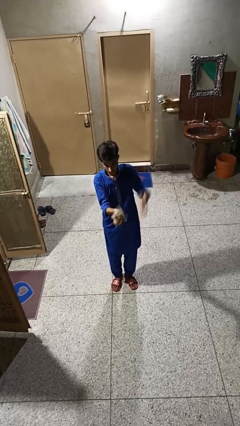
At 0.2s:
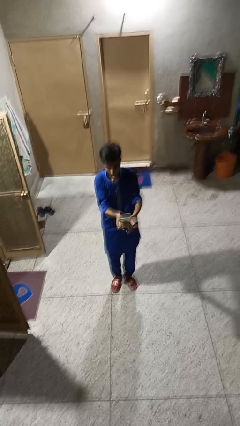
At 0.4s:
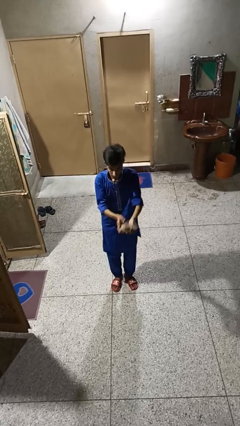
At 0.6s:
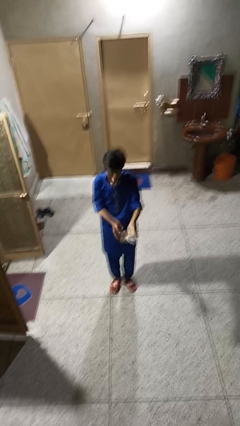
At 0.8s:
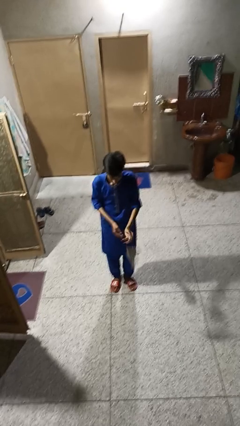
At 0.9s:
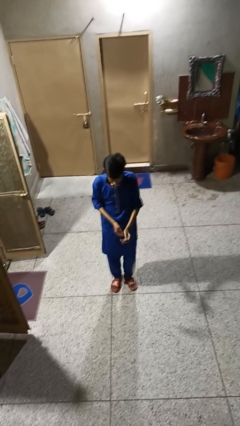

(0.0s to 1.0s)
person catches dropped object

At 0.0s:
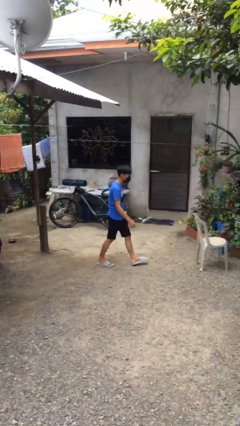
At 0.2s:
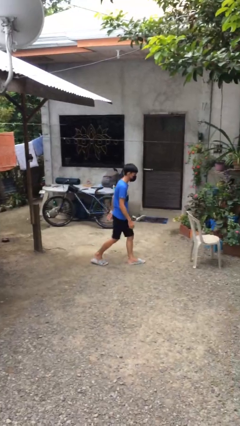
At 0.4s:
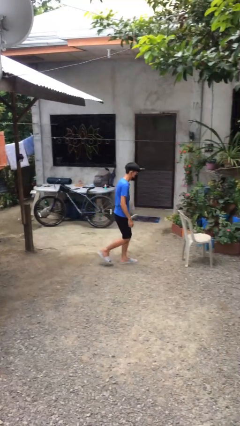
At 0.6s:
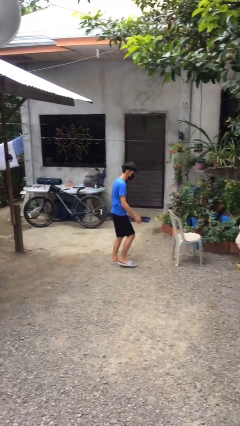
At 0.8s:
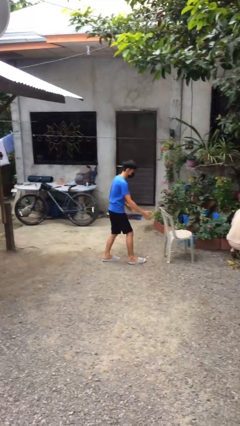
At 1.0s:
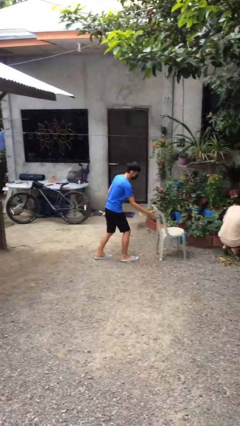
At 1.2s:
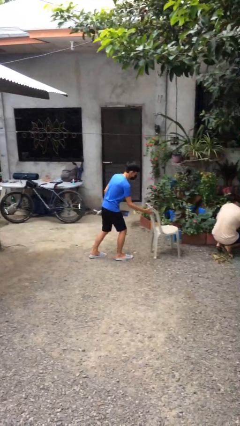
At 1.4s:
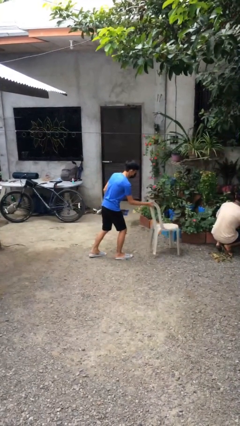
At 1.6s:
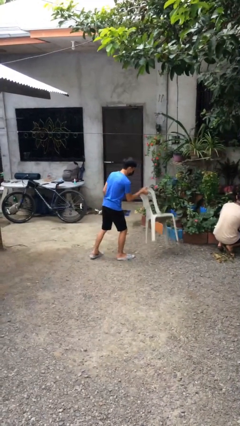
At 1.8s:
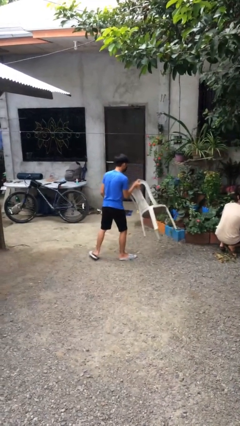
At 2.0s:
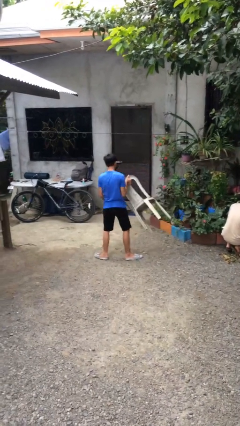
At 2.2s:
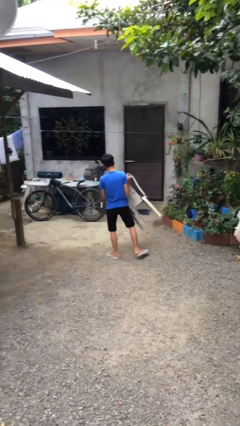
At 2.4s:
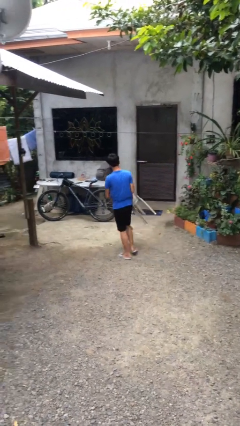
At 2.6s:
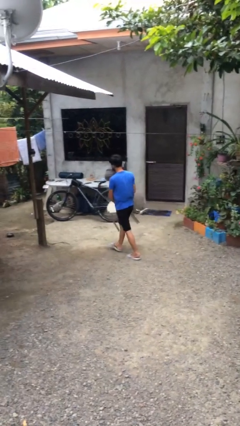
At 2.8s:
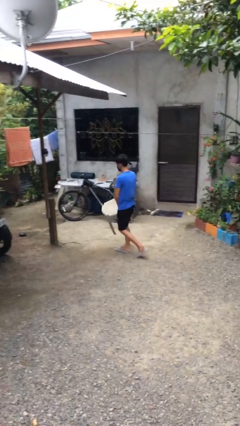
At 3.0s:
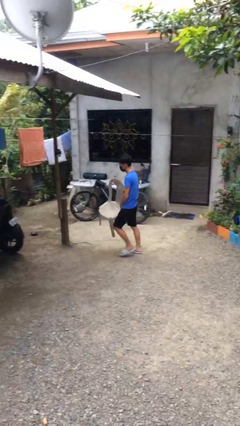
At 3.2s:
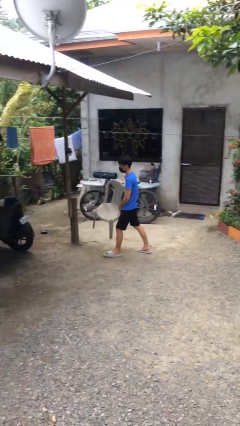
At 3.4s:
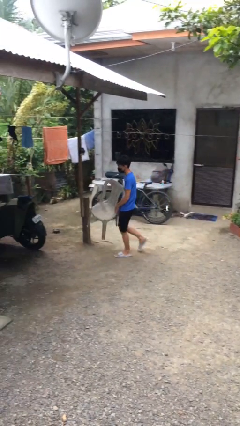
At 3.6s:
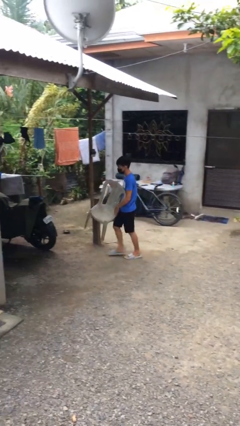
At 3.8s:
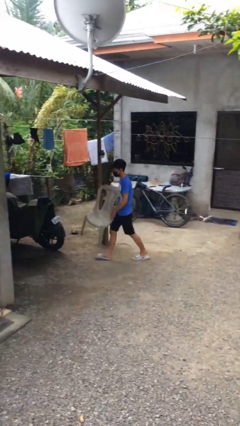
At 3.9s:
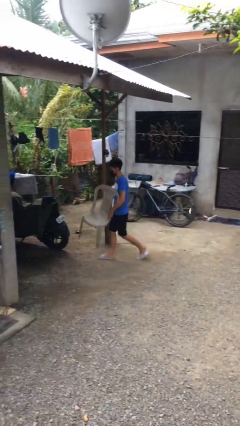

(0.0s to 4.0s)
person steals object from person

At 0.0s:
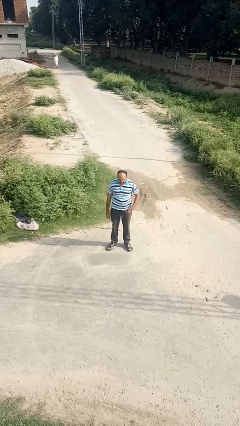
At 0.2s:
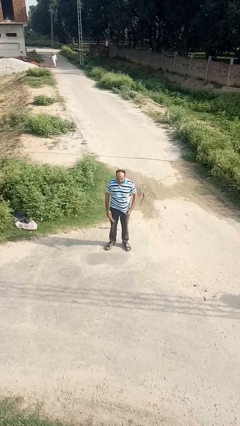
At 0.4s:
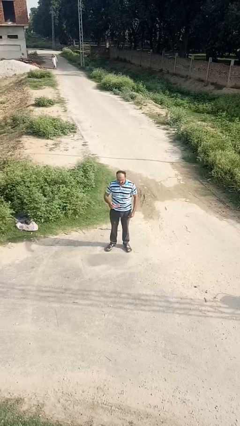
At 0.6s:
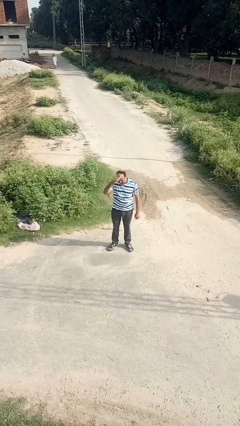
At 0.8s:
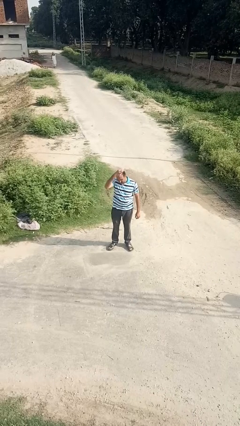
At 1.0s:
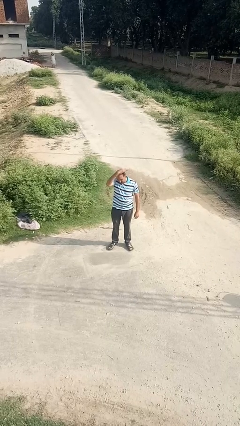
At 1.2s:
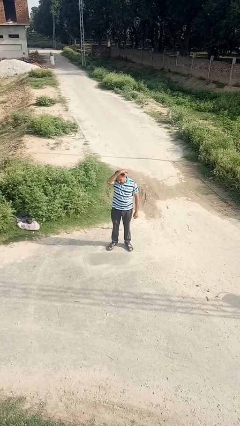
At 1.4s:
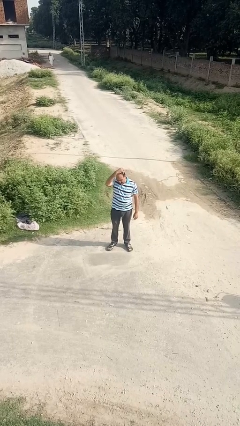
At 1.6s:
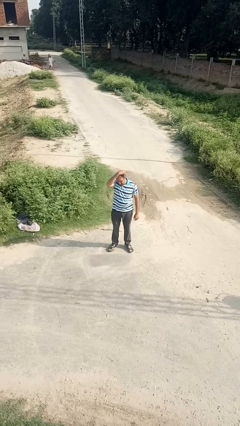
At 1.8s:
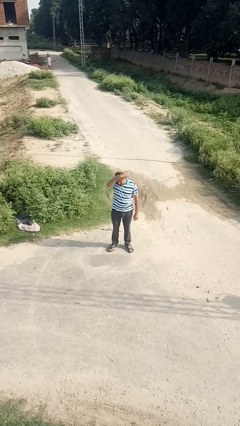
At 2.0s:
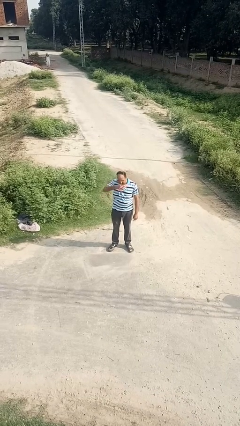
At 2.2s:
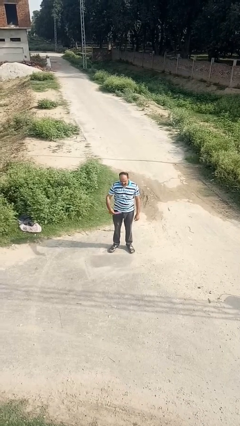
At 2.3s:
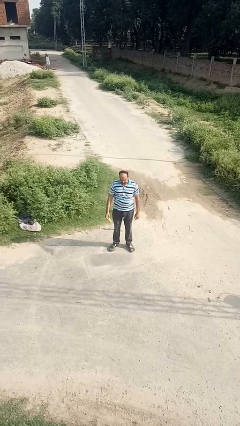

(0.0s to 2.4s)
person brushes hair

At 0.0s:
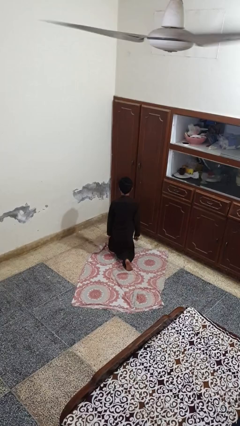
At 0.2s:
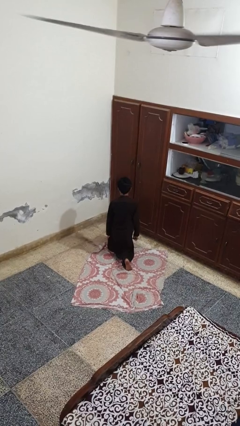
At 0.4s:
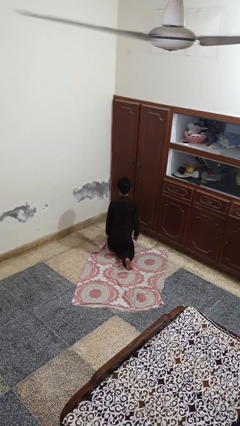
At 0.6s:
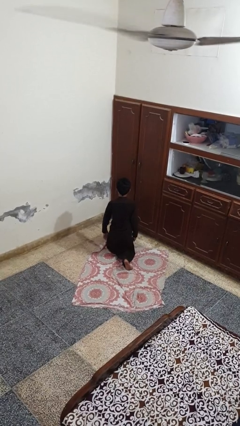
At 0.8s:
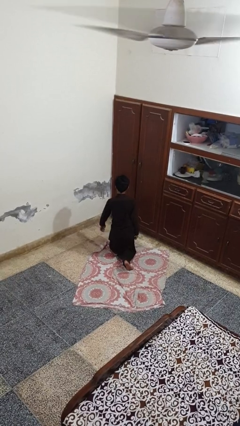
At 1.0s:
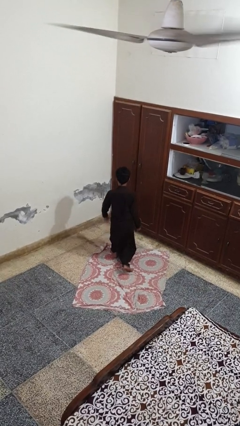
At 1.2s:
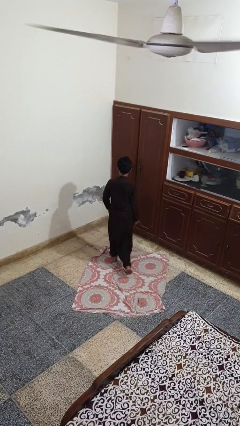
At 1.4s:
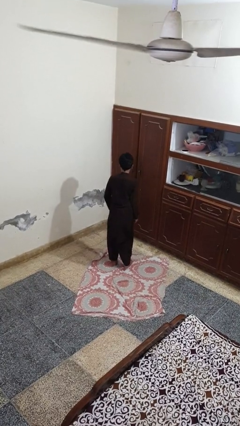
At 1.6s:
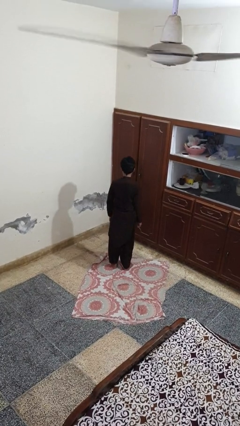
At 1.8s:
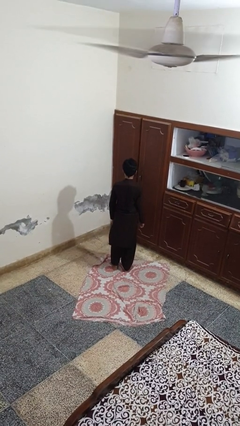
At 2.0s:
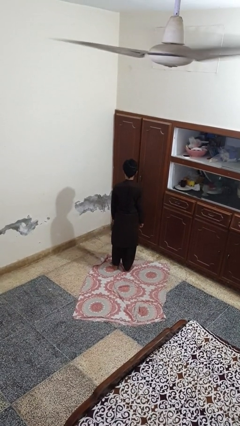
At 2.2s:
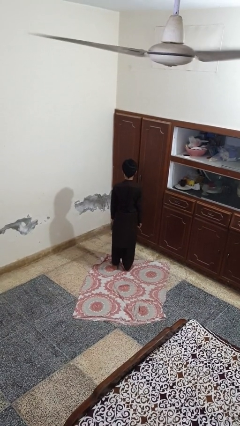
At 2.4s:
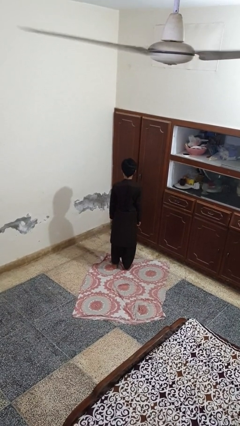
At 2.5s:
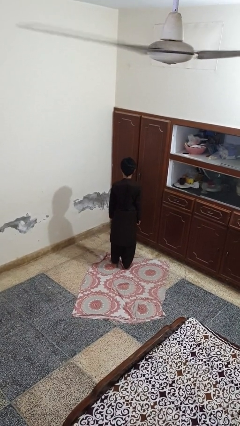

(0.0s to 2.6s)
person stands up from floor

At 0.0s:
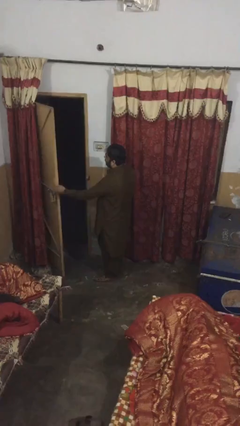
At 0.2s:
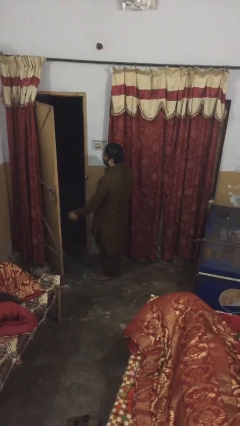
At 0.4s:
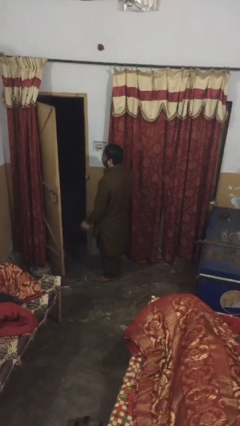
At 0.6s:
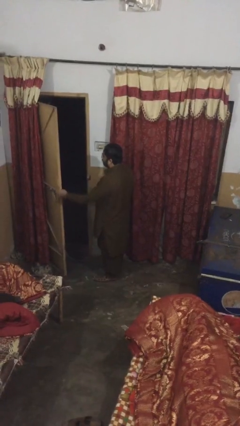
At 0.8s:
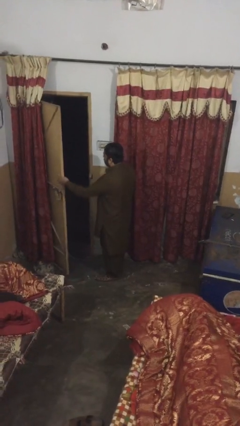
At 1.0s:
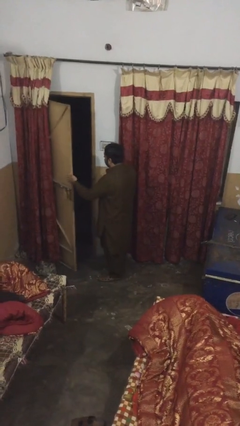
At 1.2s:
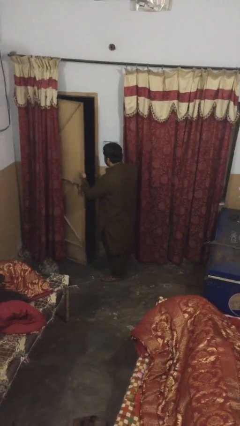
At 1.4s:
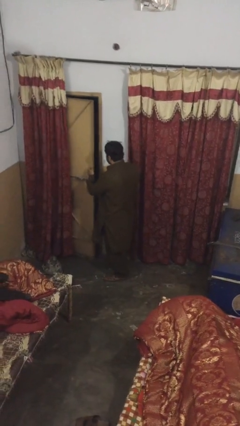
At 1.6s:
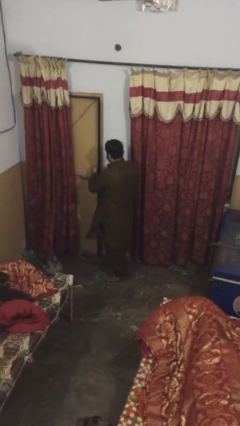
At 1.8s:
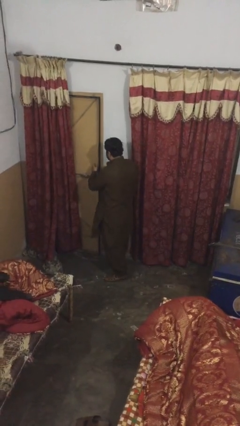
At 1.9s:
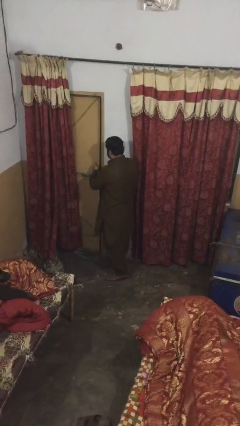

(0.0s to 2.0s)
person closes facility door

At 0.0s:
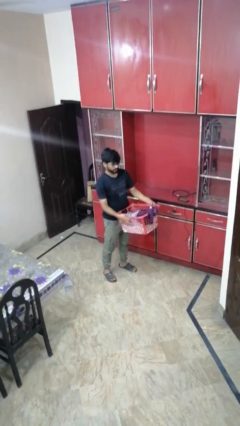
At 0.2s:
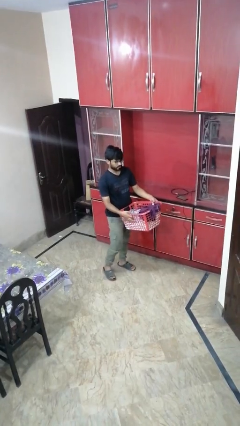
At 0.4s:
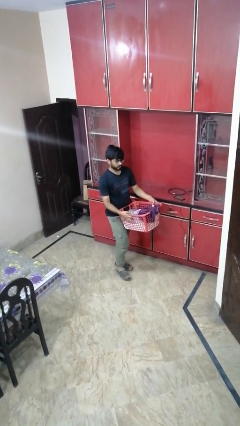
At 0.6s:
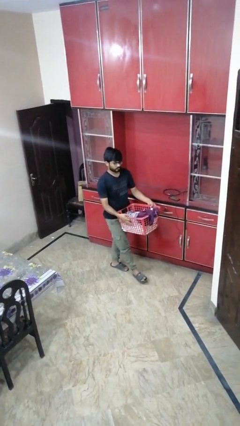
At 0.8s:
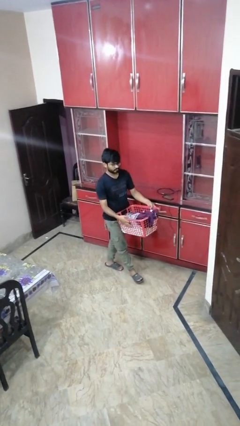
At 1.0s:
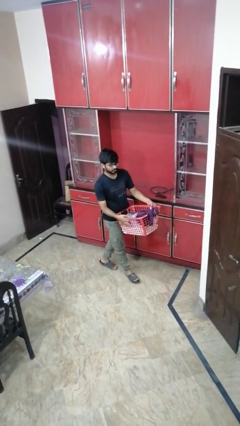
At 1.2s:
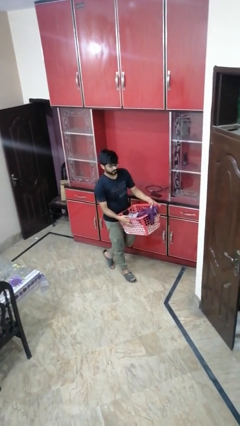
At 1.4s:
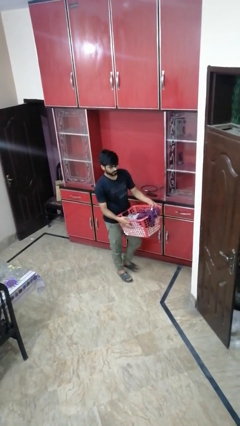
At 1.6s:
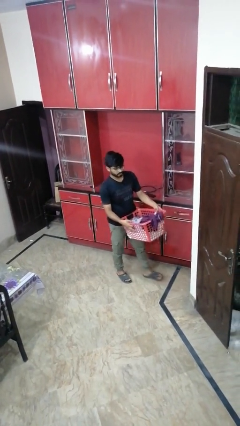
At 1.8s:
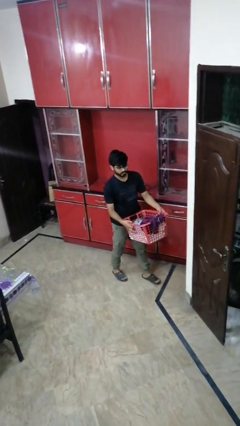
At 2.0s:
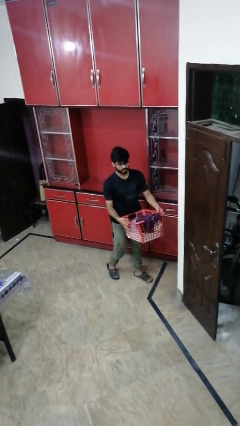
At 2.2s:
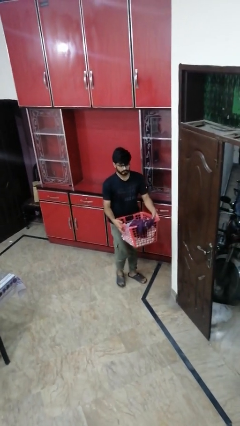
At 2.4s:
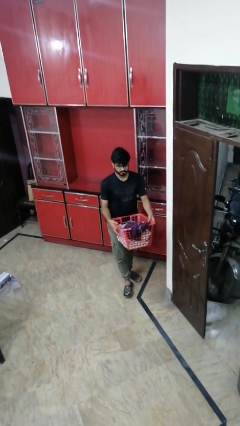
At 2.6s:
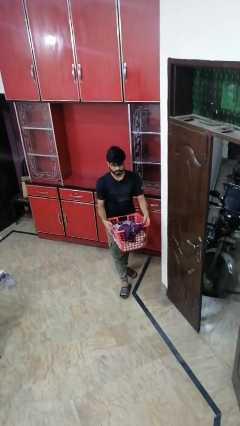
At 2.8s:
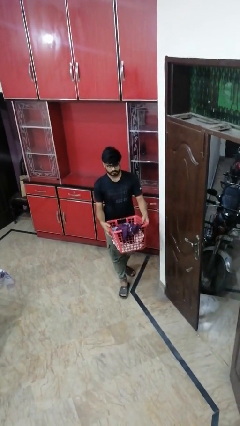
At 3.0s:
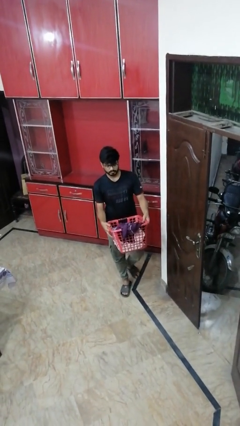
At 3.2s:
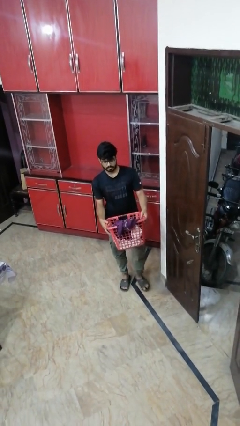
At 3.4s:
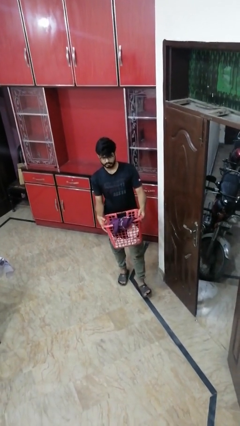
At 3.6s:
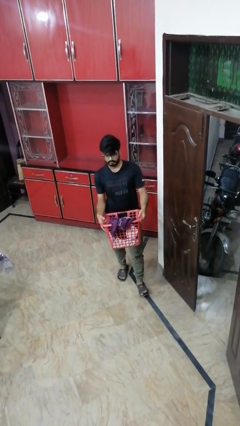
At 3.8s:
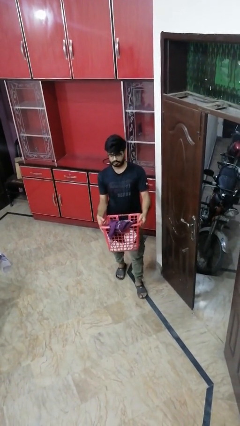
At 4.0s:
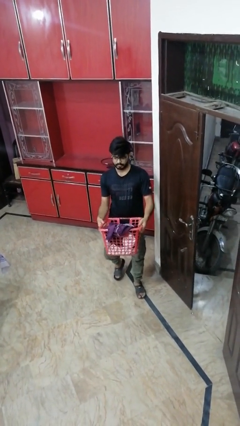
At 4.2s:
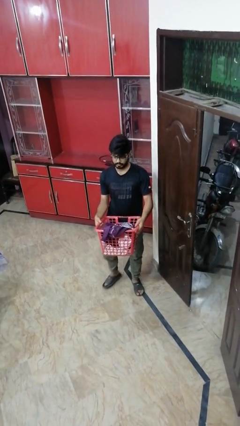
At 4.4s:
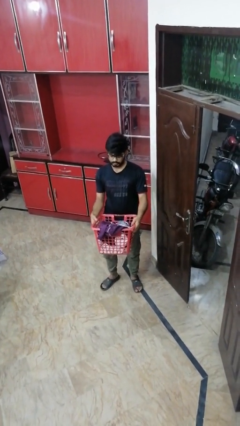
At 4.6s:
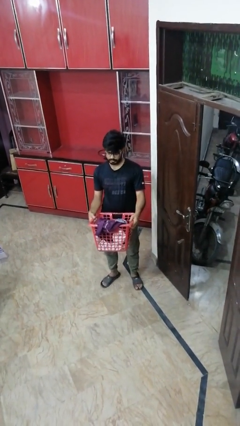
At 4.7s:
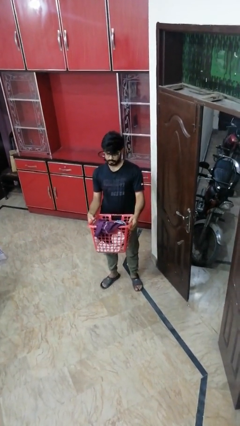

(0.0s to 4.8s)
person carries laundry basket

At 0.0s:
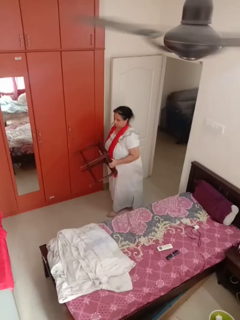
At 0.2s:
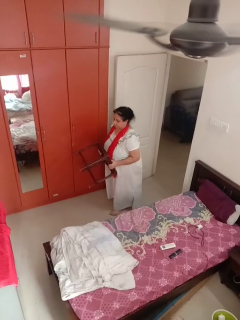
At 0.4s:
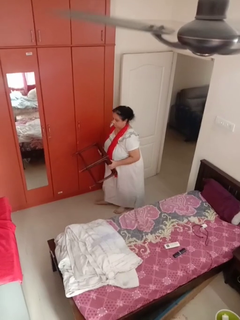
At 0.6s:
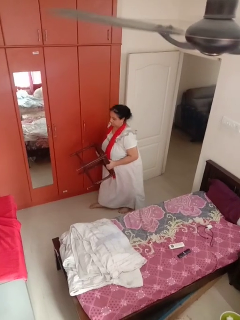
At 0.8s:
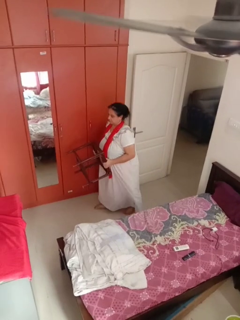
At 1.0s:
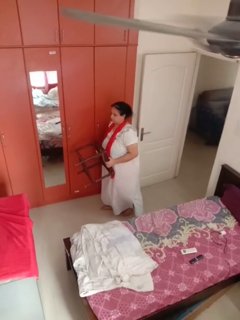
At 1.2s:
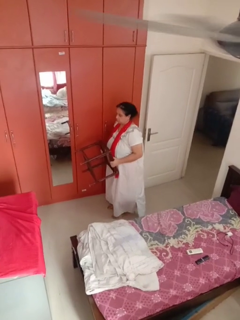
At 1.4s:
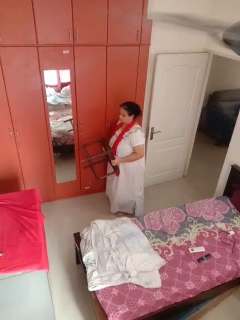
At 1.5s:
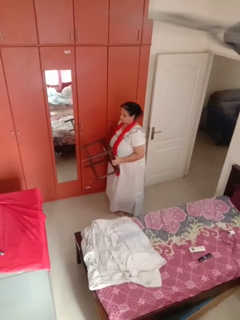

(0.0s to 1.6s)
person carries furniture
